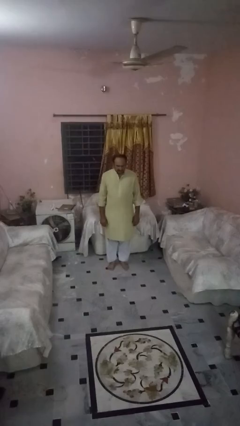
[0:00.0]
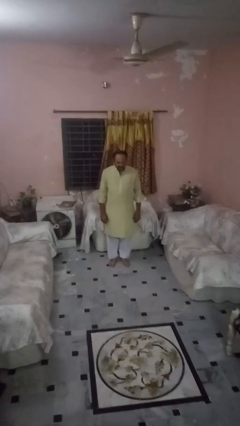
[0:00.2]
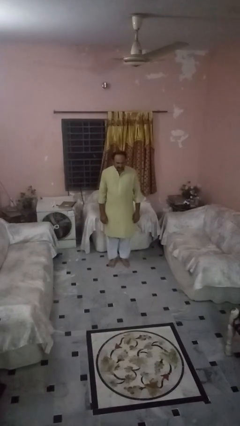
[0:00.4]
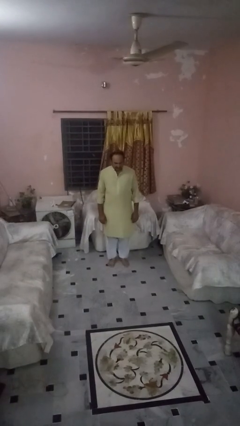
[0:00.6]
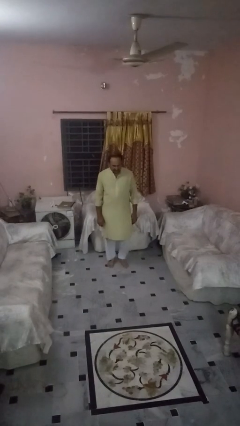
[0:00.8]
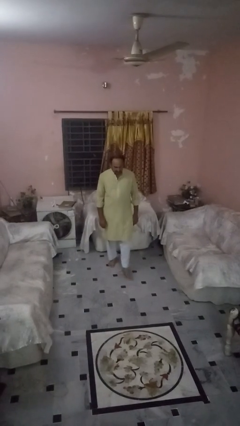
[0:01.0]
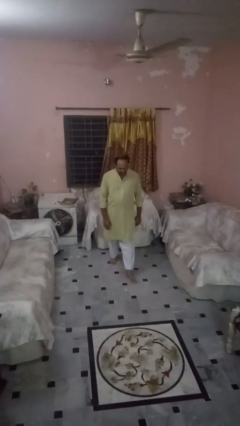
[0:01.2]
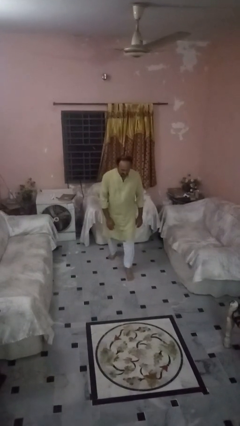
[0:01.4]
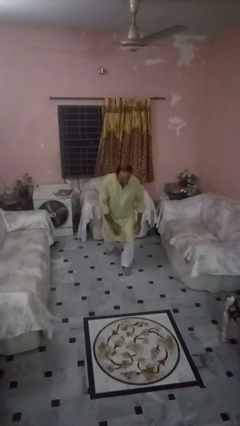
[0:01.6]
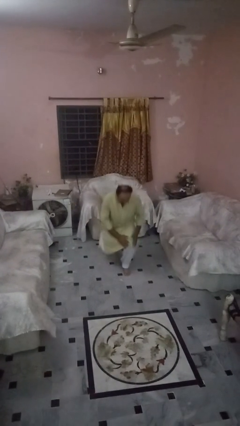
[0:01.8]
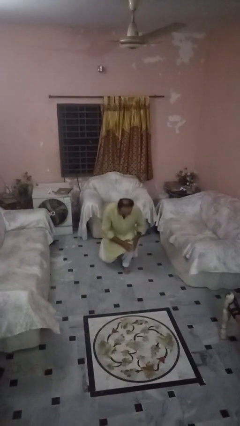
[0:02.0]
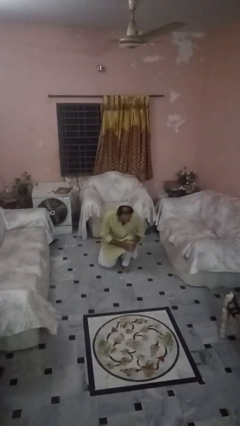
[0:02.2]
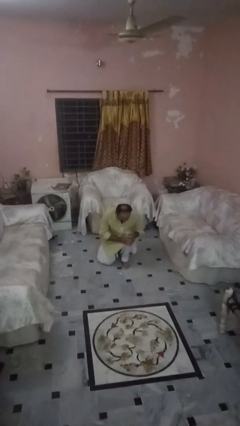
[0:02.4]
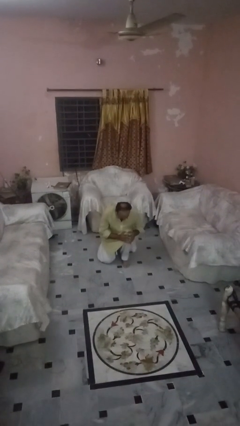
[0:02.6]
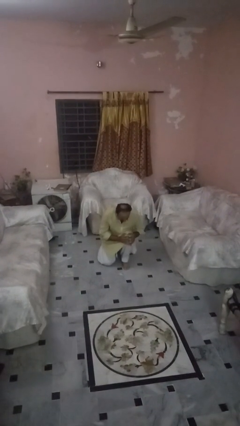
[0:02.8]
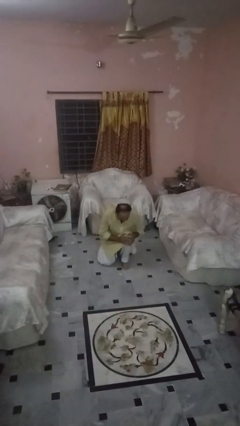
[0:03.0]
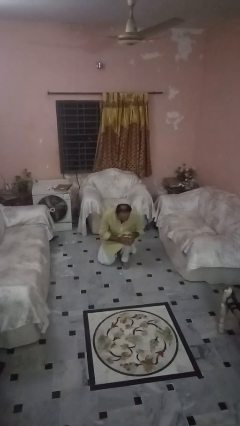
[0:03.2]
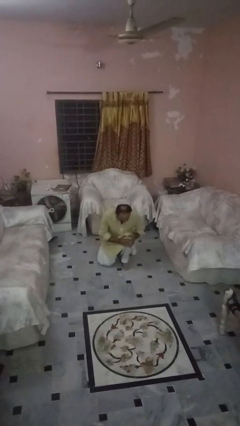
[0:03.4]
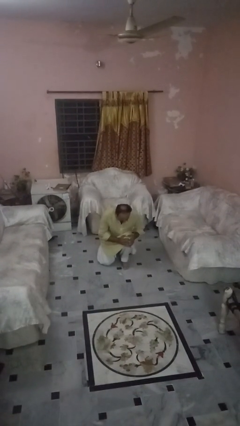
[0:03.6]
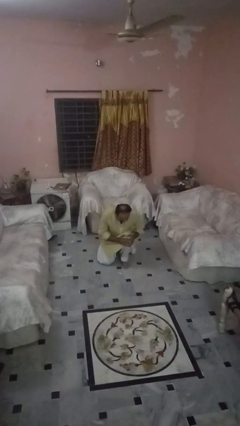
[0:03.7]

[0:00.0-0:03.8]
person exercises with lunges

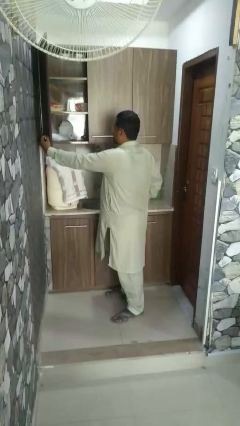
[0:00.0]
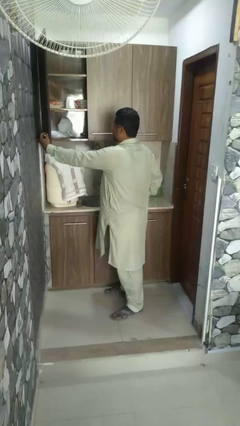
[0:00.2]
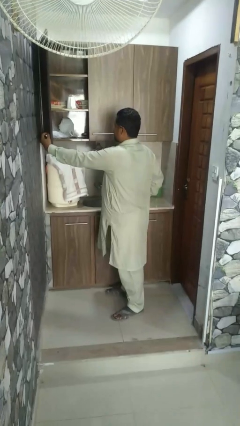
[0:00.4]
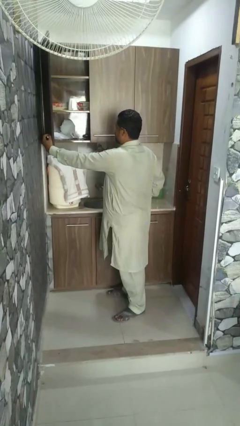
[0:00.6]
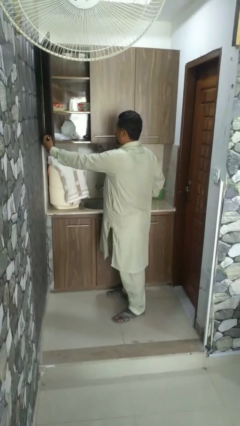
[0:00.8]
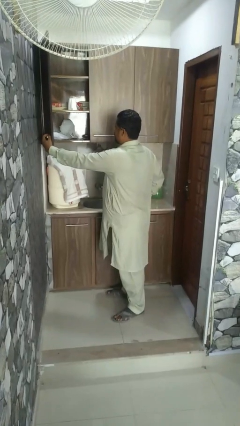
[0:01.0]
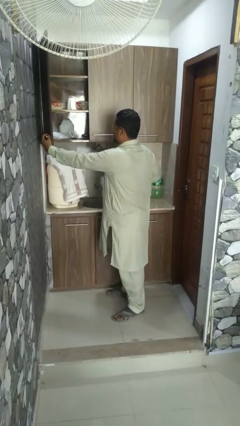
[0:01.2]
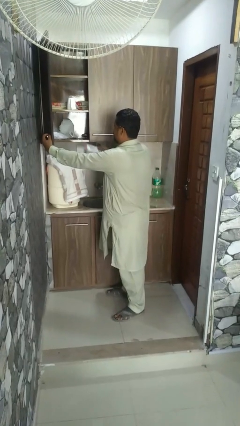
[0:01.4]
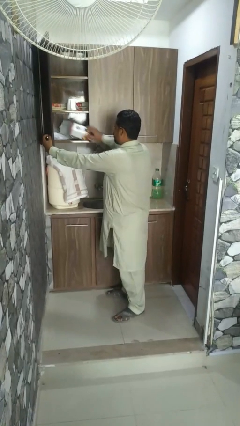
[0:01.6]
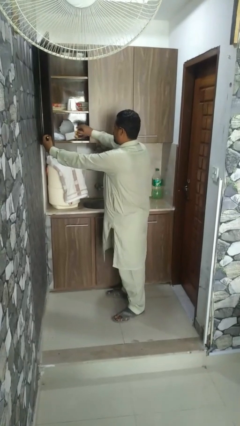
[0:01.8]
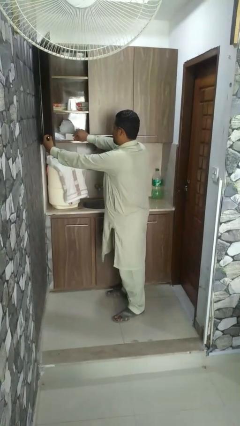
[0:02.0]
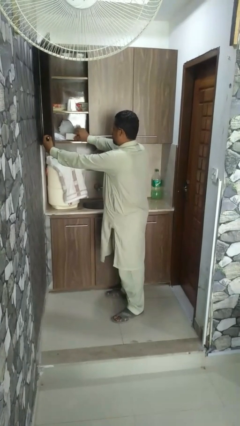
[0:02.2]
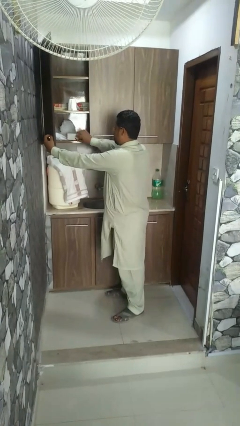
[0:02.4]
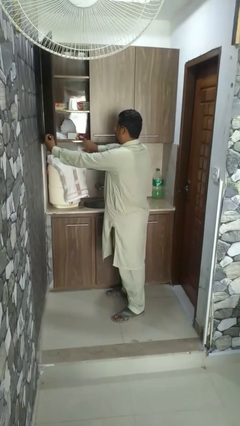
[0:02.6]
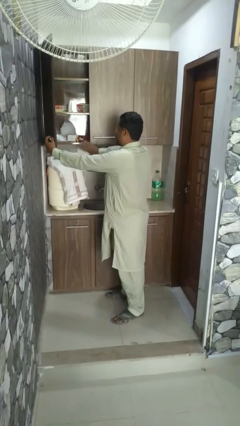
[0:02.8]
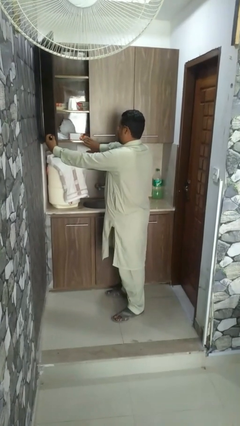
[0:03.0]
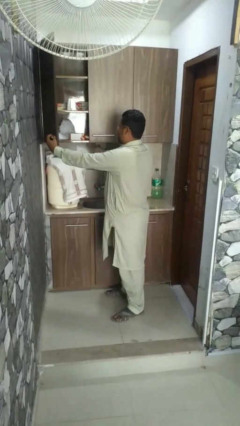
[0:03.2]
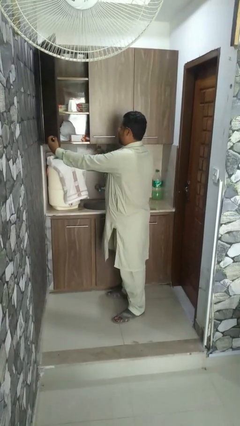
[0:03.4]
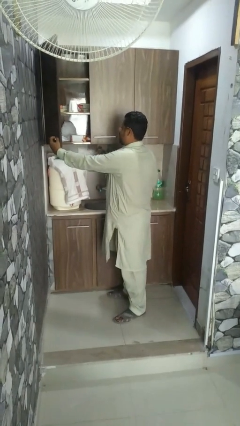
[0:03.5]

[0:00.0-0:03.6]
person puts object into microwave

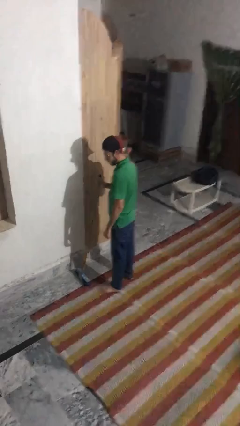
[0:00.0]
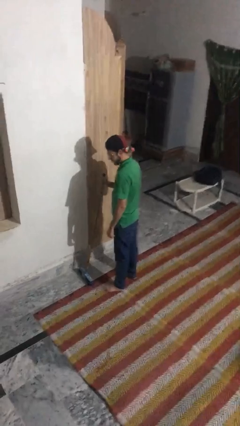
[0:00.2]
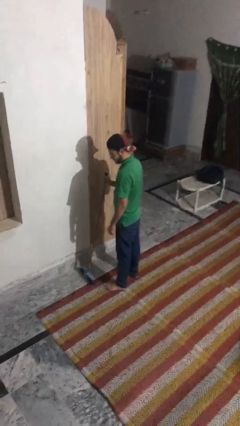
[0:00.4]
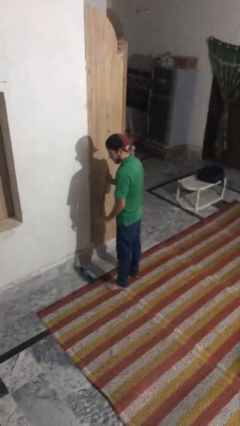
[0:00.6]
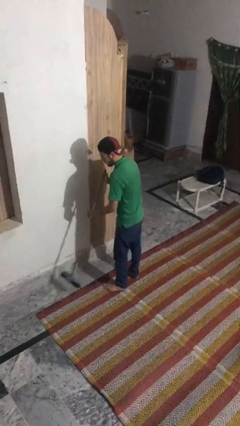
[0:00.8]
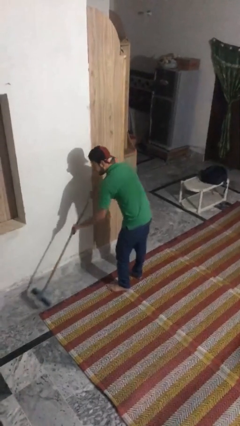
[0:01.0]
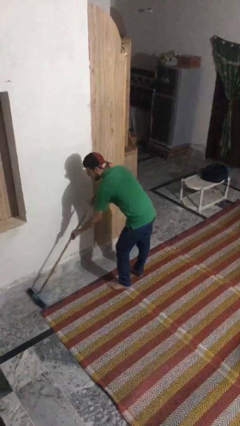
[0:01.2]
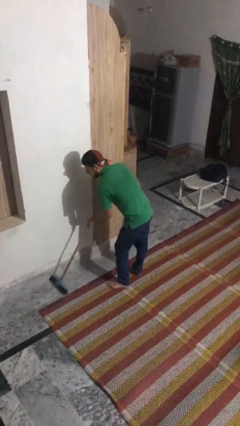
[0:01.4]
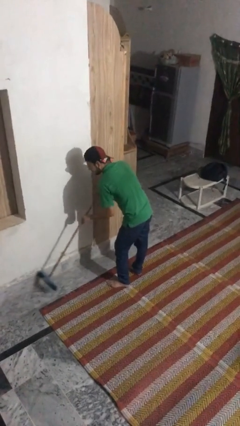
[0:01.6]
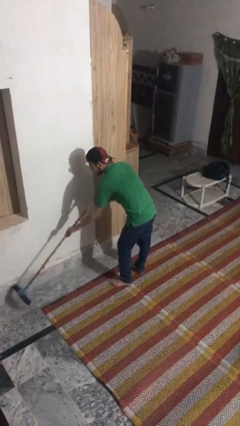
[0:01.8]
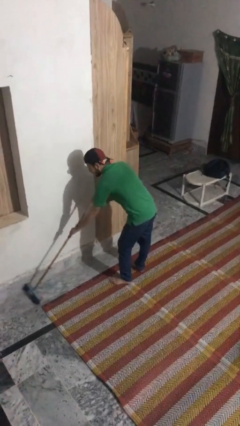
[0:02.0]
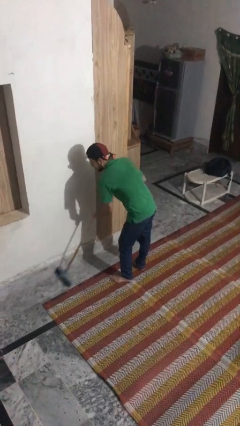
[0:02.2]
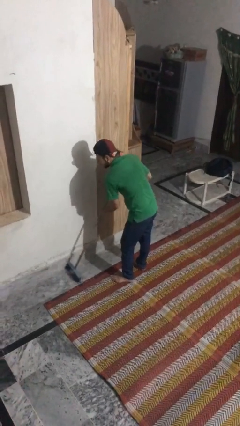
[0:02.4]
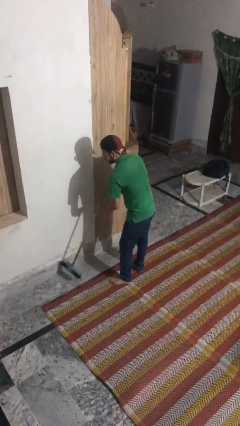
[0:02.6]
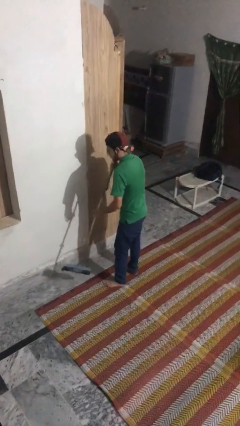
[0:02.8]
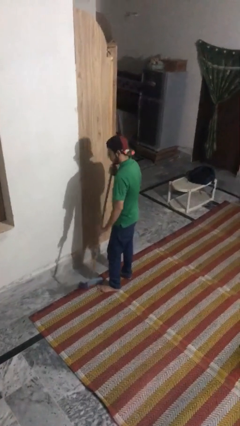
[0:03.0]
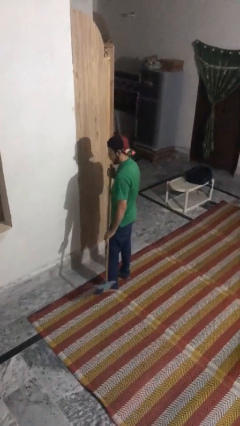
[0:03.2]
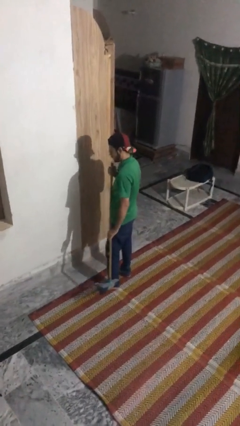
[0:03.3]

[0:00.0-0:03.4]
person sweeps floor

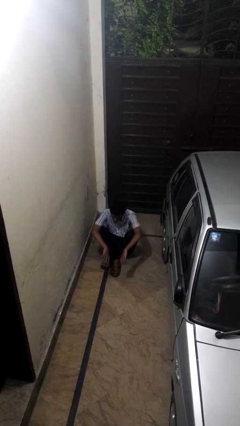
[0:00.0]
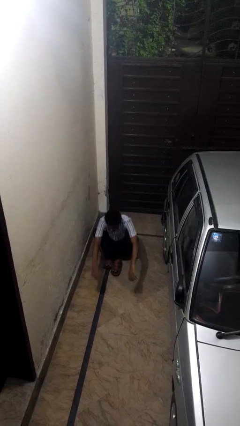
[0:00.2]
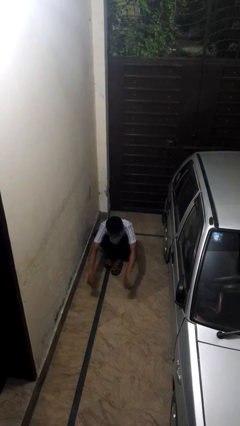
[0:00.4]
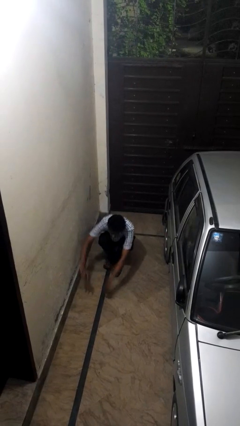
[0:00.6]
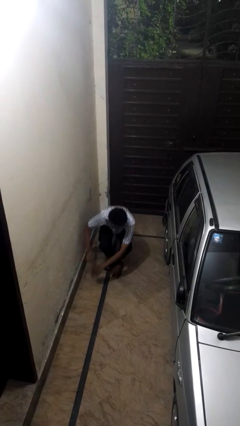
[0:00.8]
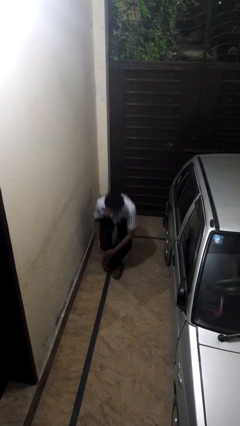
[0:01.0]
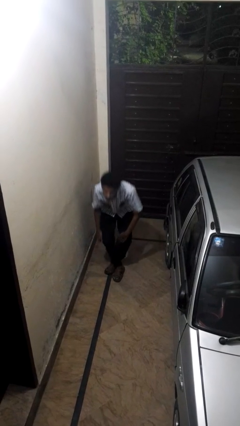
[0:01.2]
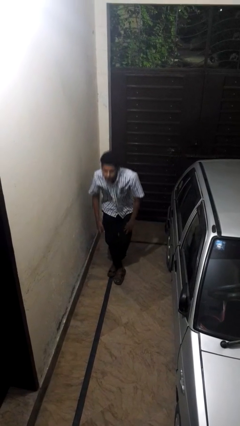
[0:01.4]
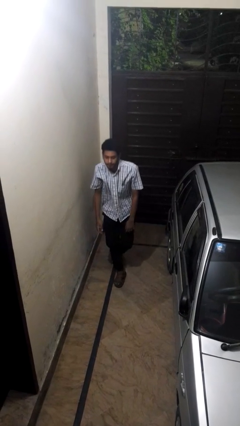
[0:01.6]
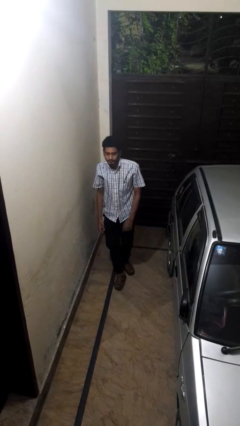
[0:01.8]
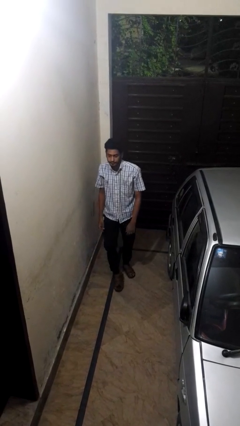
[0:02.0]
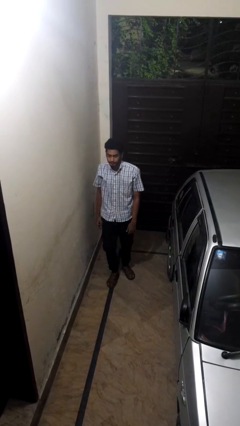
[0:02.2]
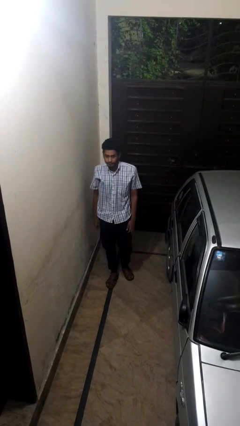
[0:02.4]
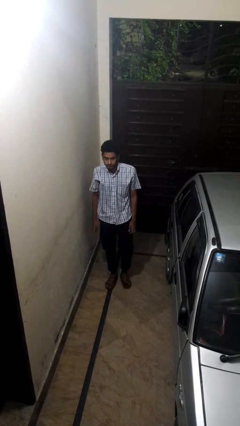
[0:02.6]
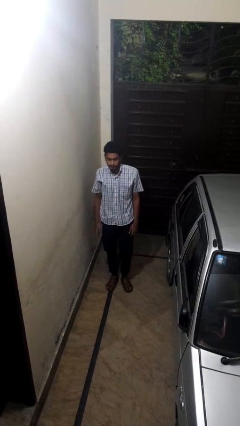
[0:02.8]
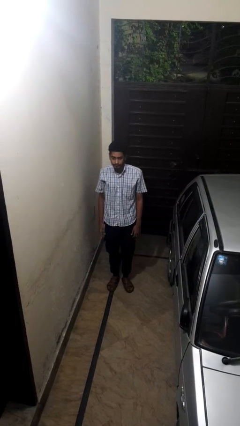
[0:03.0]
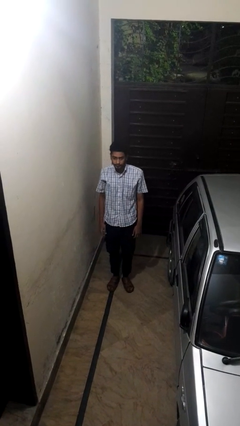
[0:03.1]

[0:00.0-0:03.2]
person stands up from floor

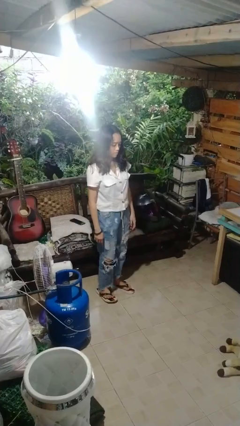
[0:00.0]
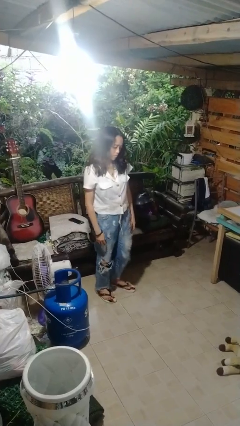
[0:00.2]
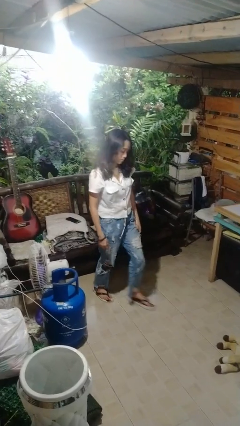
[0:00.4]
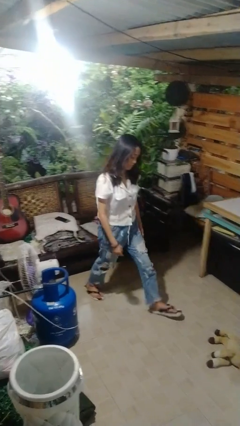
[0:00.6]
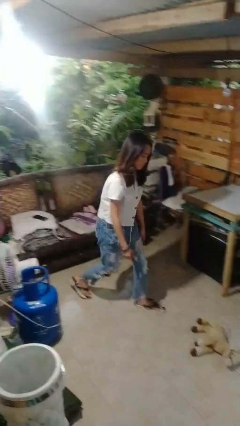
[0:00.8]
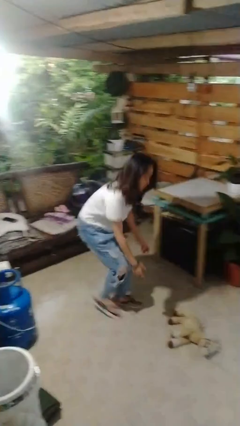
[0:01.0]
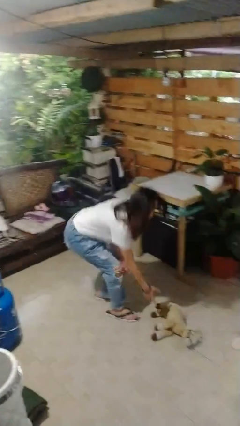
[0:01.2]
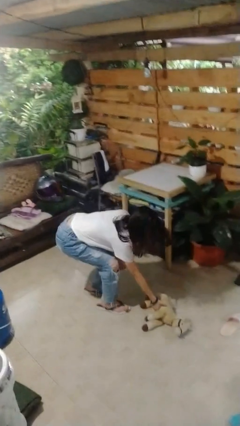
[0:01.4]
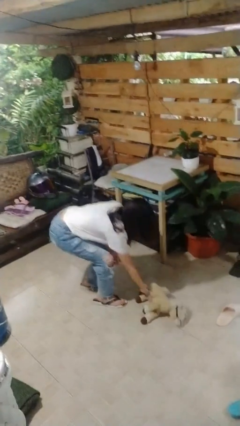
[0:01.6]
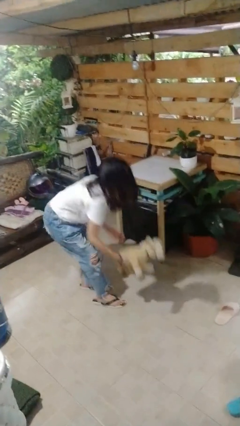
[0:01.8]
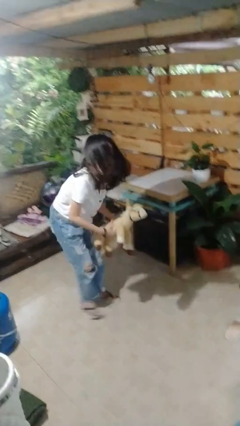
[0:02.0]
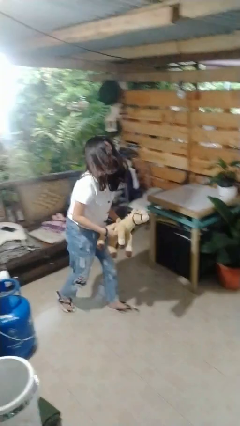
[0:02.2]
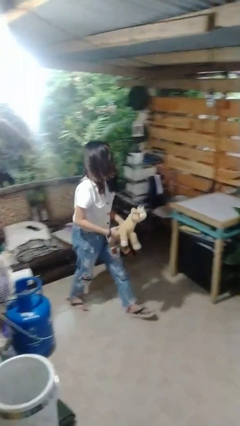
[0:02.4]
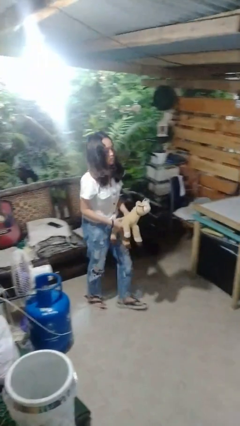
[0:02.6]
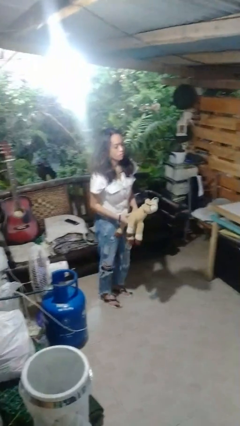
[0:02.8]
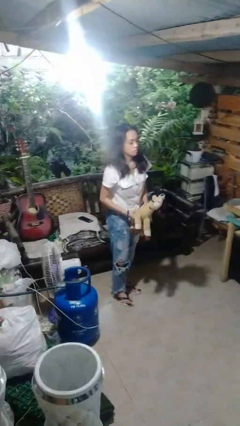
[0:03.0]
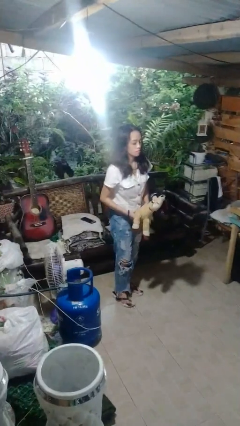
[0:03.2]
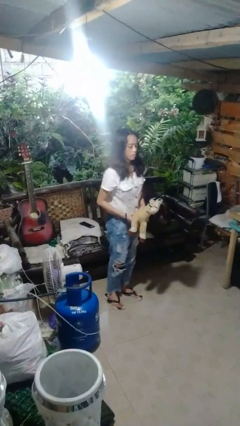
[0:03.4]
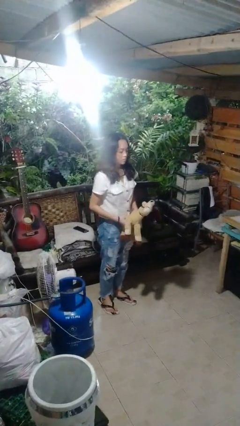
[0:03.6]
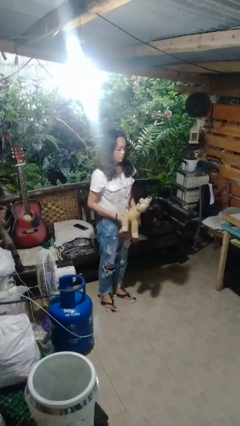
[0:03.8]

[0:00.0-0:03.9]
person picks up object from floor

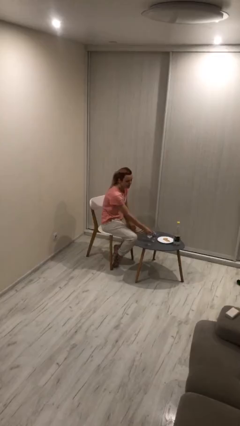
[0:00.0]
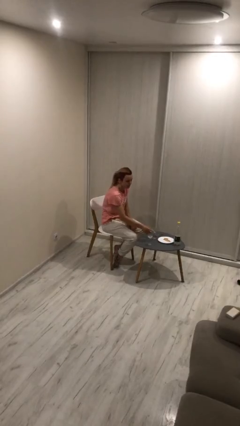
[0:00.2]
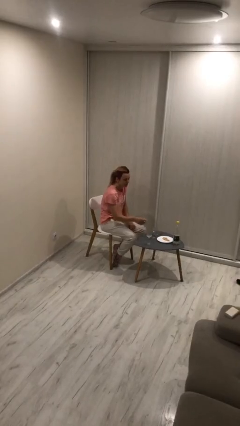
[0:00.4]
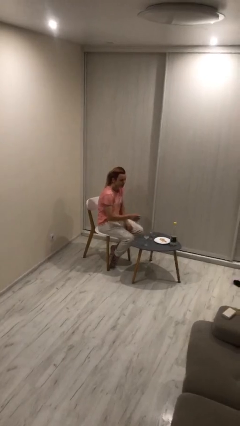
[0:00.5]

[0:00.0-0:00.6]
person picks up object from table
